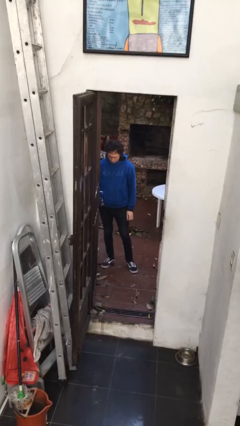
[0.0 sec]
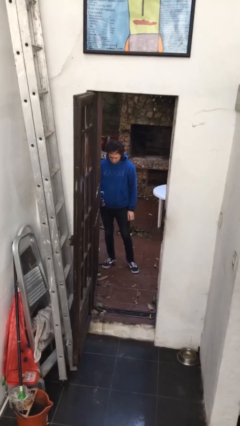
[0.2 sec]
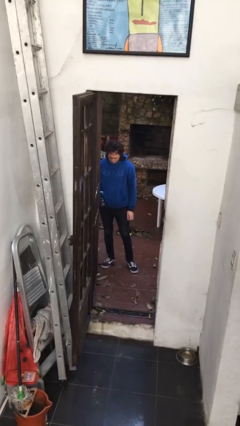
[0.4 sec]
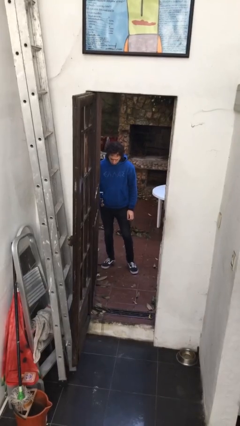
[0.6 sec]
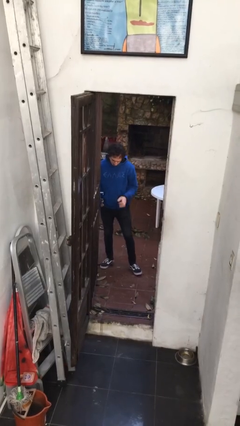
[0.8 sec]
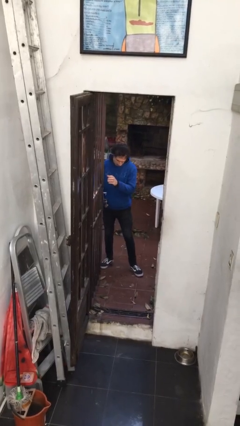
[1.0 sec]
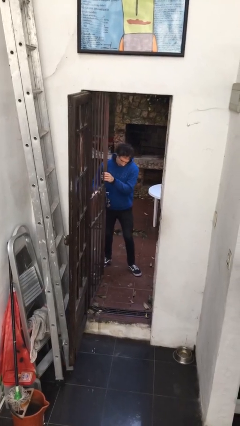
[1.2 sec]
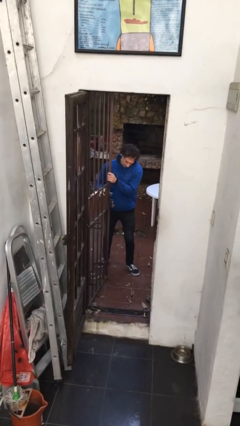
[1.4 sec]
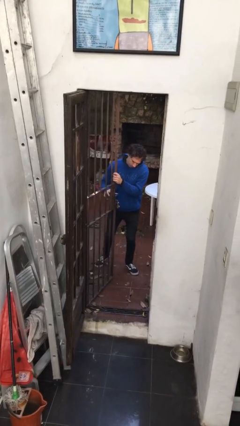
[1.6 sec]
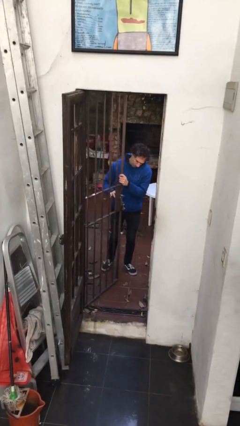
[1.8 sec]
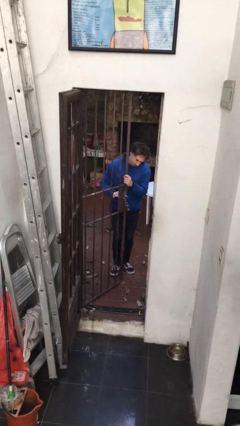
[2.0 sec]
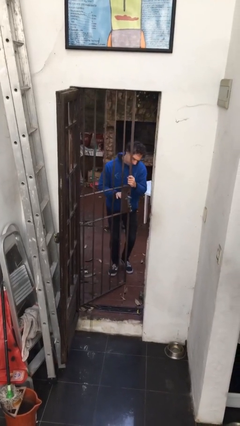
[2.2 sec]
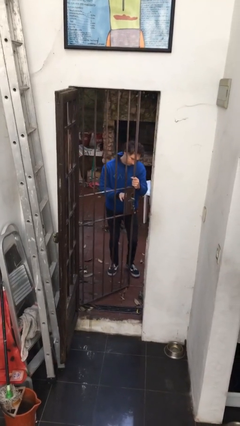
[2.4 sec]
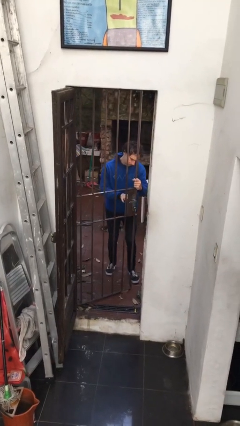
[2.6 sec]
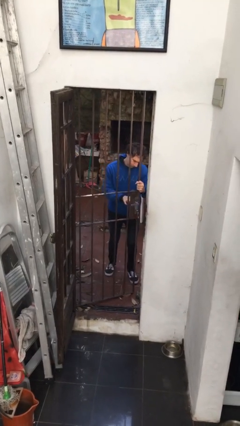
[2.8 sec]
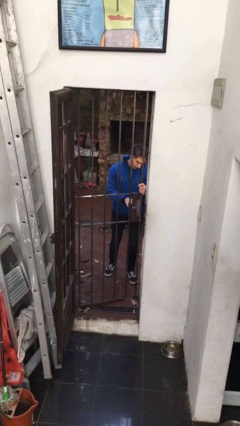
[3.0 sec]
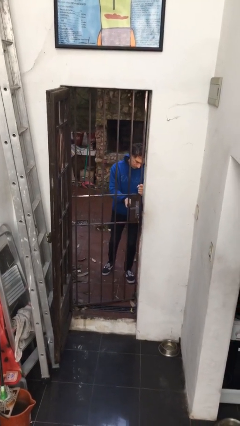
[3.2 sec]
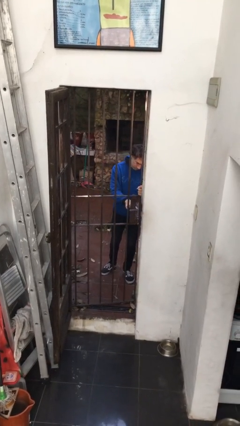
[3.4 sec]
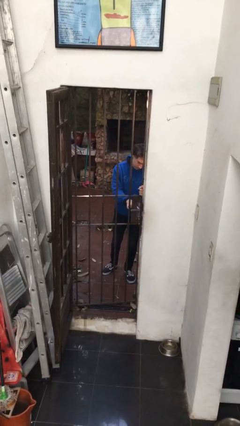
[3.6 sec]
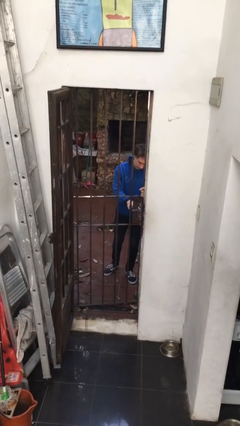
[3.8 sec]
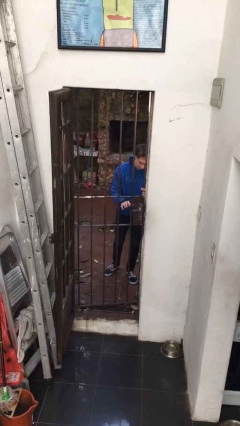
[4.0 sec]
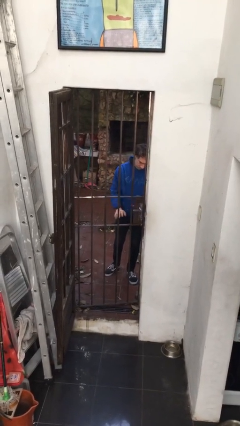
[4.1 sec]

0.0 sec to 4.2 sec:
person closes gate

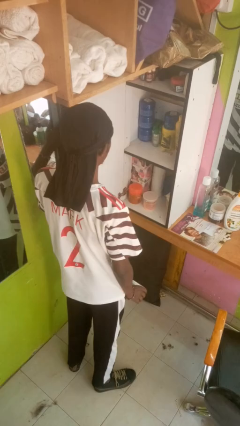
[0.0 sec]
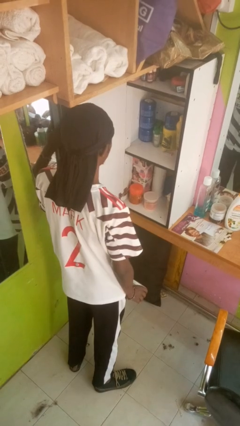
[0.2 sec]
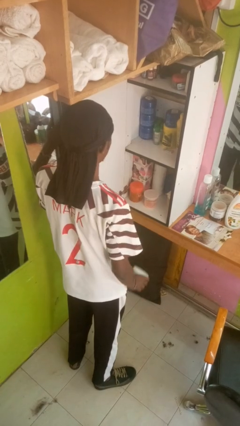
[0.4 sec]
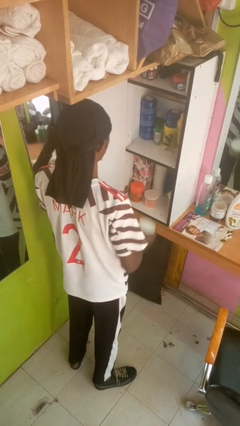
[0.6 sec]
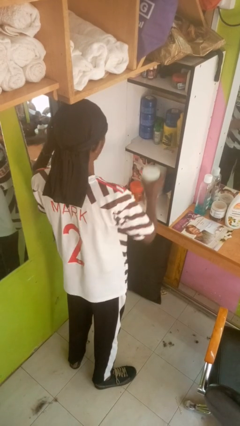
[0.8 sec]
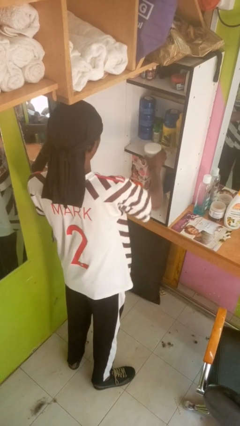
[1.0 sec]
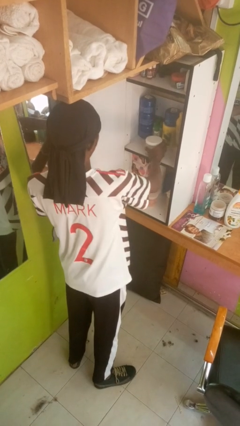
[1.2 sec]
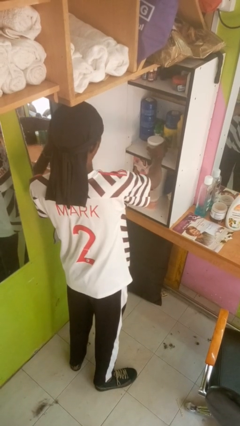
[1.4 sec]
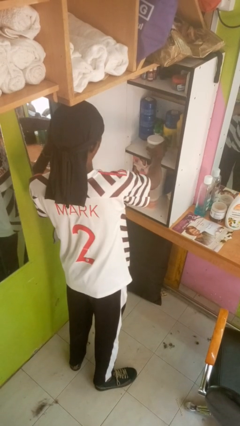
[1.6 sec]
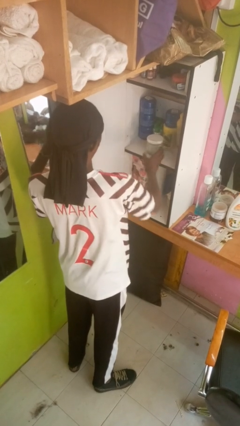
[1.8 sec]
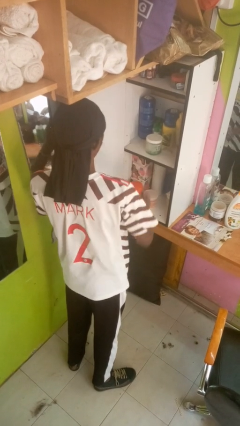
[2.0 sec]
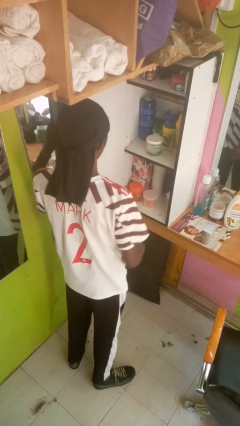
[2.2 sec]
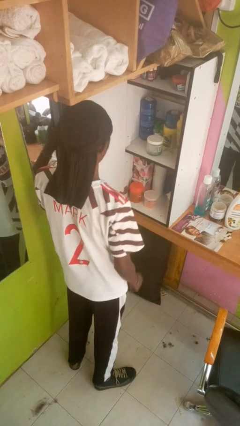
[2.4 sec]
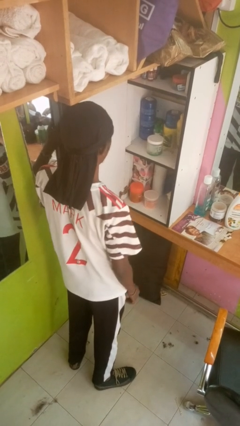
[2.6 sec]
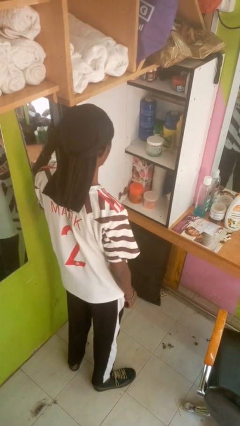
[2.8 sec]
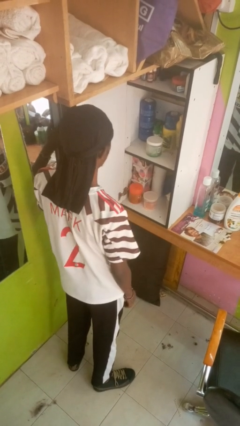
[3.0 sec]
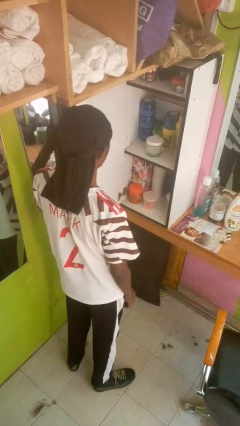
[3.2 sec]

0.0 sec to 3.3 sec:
person puts down object into cabinet

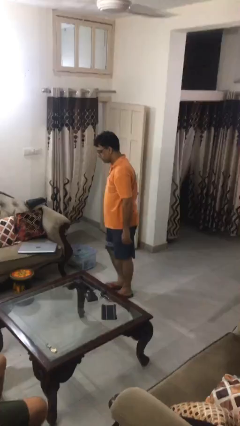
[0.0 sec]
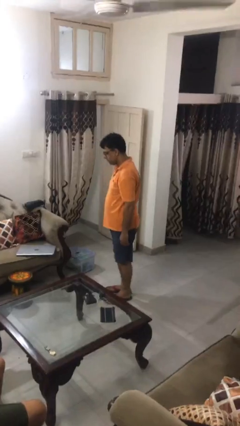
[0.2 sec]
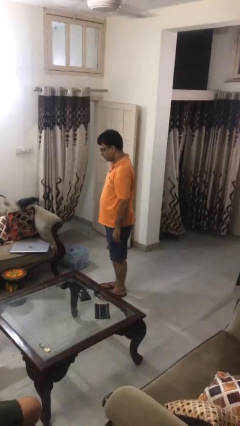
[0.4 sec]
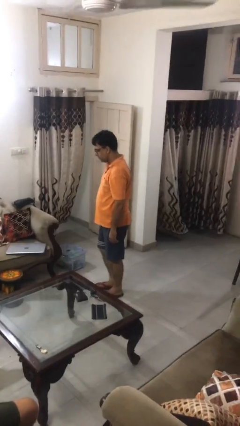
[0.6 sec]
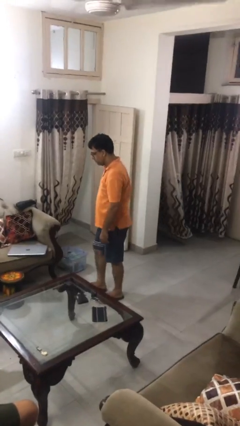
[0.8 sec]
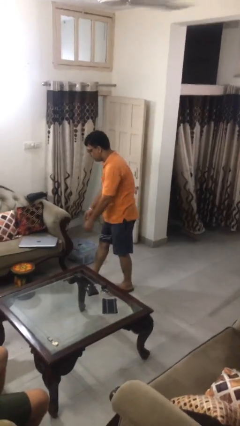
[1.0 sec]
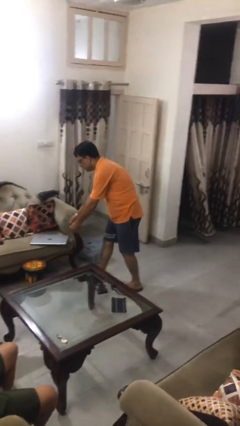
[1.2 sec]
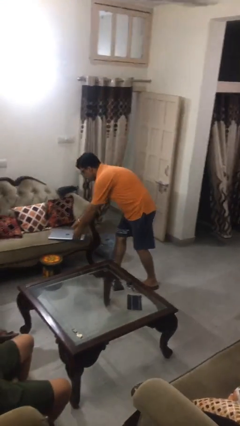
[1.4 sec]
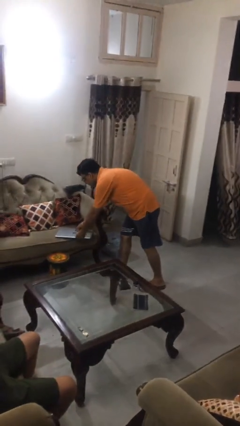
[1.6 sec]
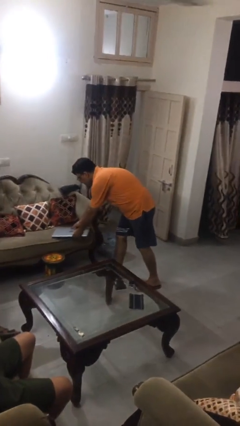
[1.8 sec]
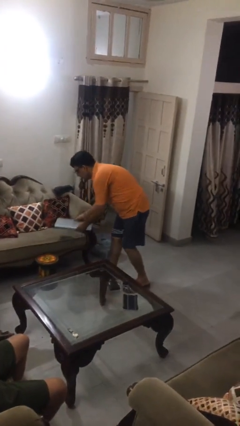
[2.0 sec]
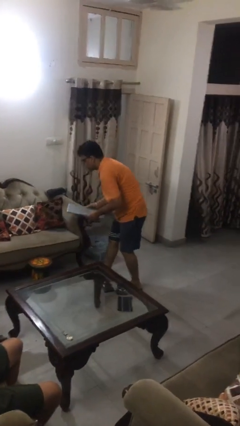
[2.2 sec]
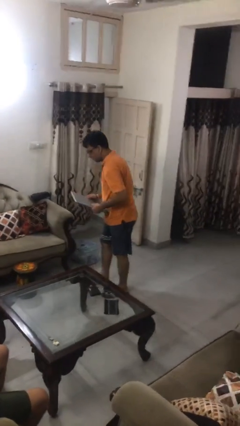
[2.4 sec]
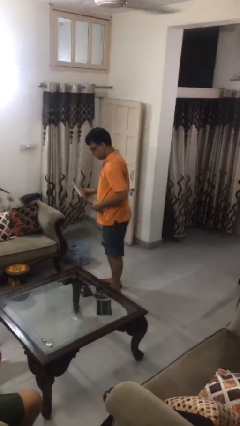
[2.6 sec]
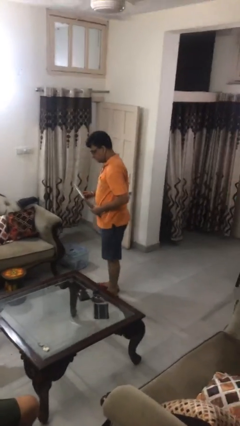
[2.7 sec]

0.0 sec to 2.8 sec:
person picks up object from couch

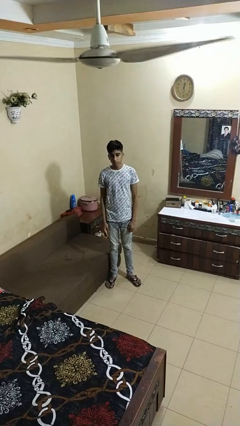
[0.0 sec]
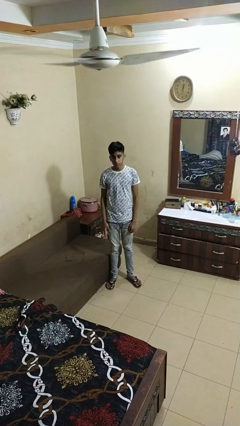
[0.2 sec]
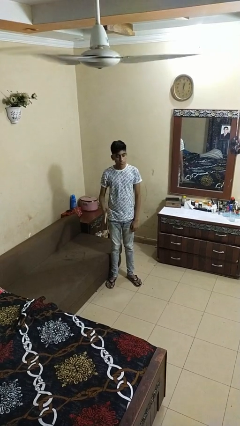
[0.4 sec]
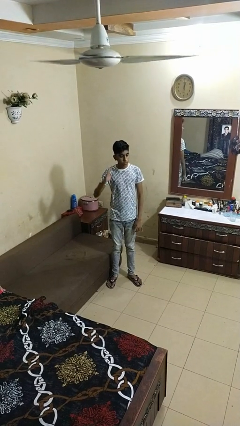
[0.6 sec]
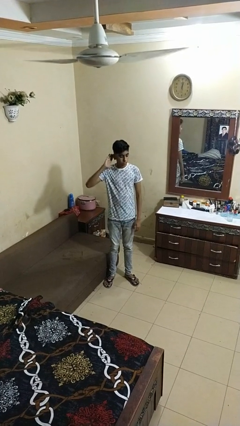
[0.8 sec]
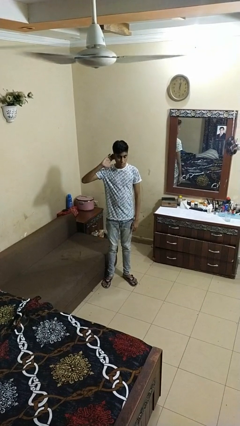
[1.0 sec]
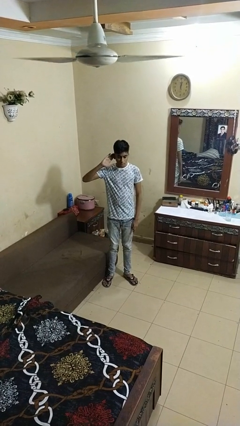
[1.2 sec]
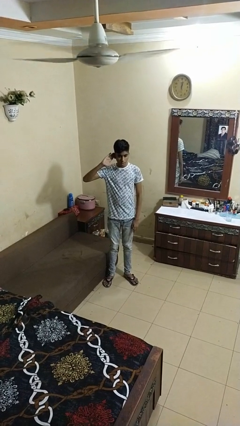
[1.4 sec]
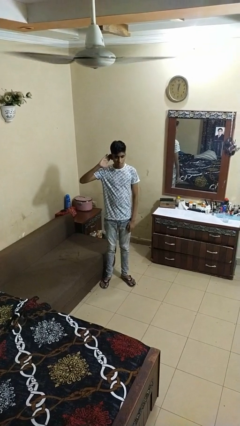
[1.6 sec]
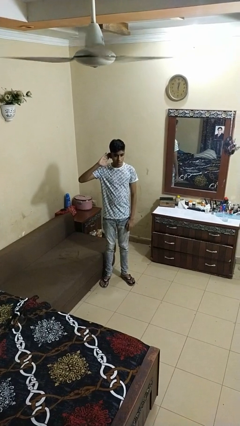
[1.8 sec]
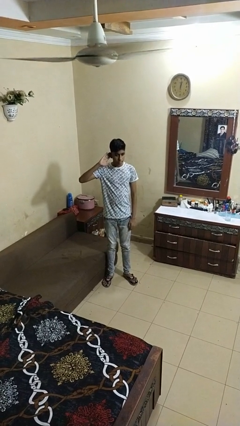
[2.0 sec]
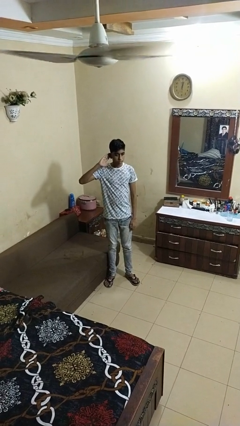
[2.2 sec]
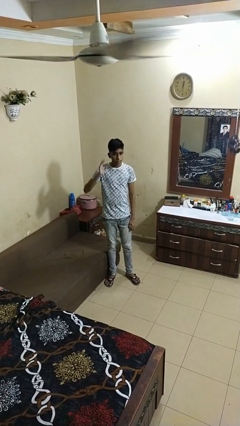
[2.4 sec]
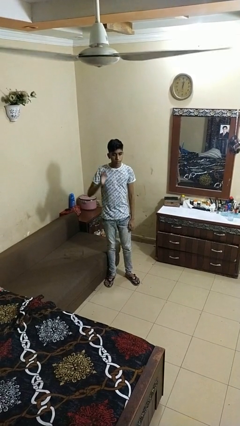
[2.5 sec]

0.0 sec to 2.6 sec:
person gestures listen closely

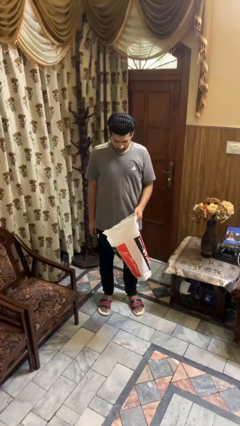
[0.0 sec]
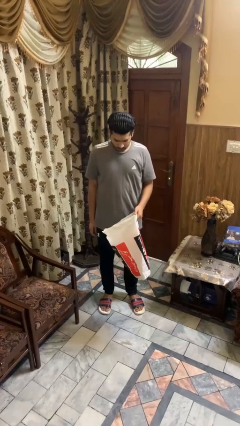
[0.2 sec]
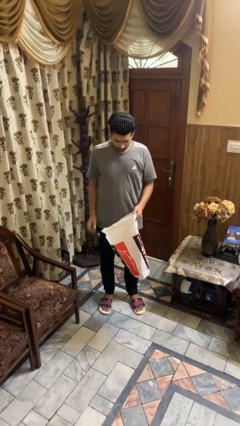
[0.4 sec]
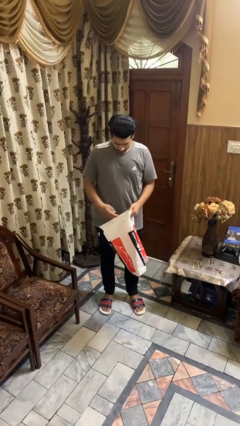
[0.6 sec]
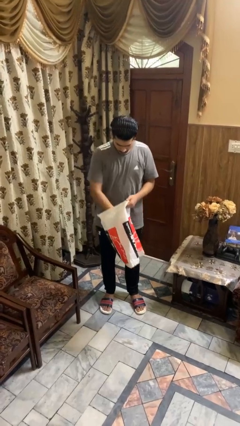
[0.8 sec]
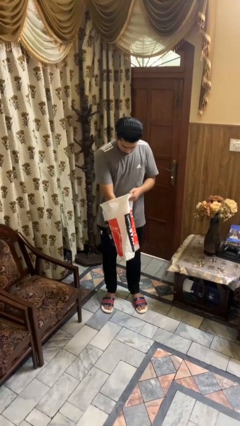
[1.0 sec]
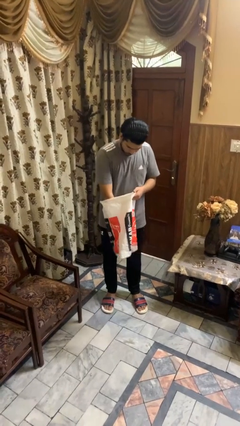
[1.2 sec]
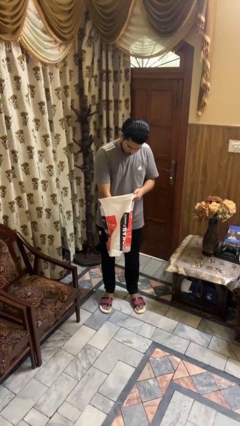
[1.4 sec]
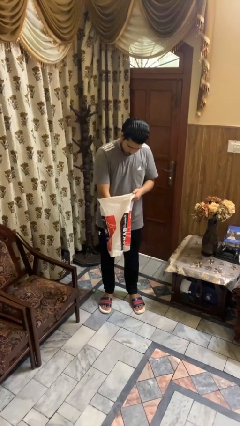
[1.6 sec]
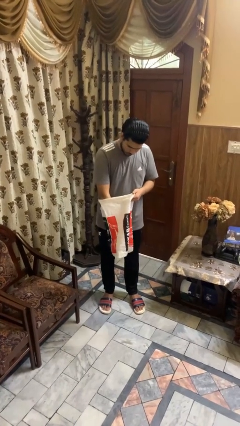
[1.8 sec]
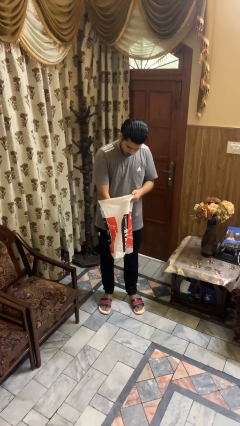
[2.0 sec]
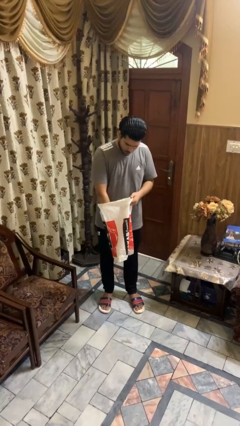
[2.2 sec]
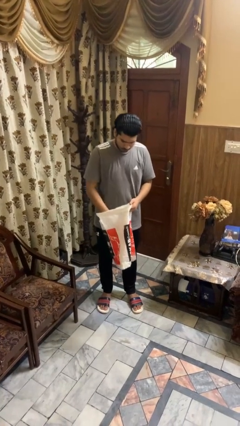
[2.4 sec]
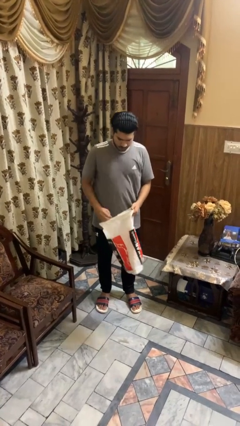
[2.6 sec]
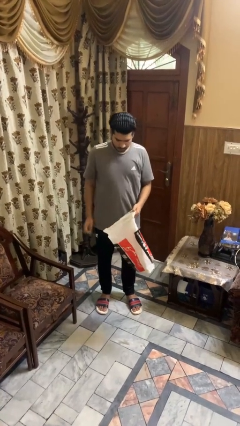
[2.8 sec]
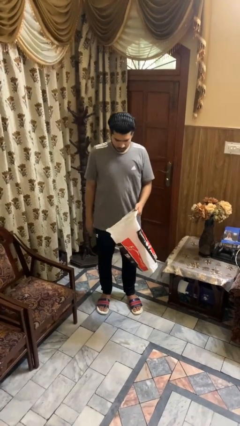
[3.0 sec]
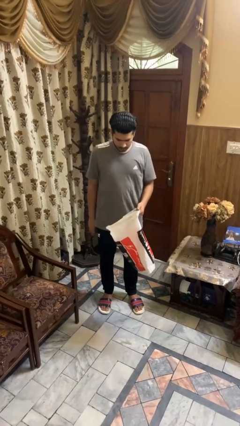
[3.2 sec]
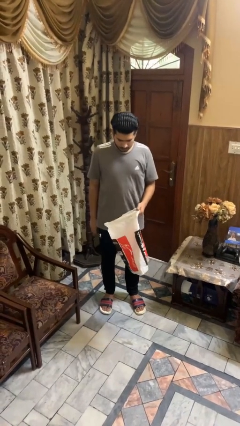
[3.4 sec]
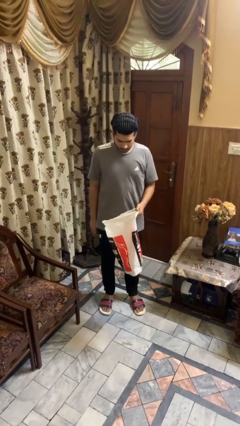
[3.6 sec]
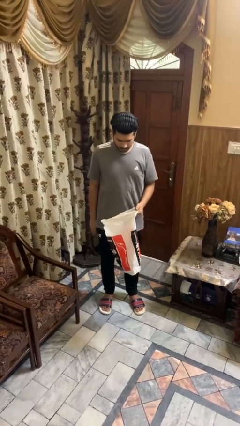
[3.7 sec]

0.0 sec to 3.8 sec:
person searches in bag

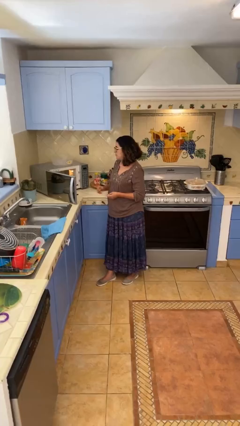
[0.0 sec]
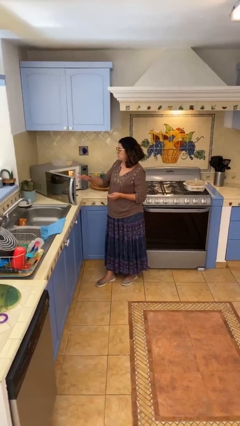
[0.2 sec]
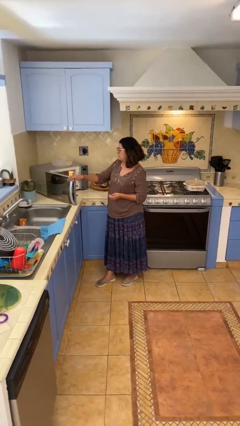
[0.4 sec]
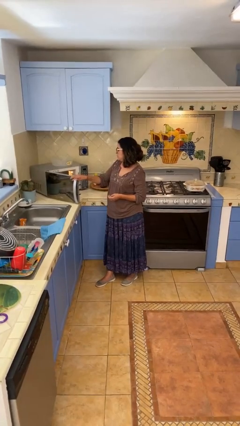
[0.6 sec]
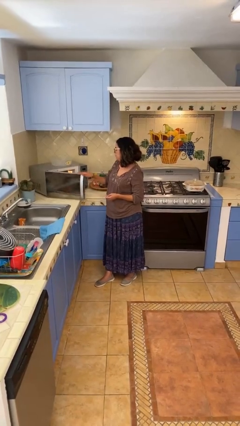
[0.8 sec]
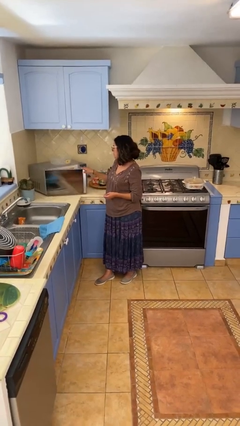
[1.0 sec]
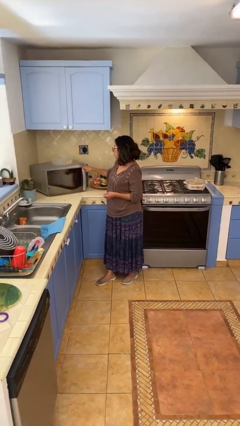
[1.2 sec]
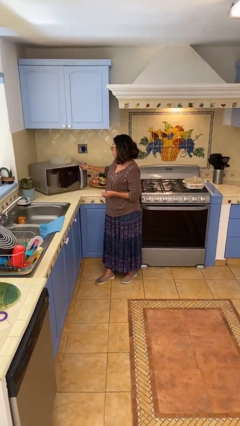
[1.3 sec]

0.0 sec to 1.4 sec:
person closes microwave
